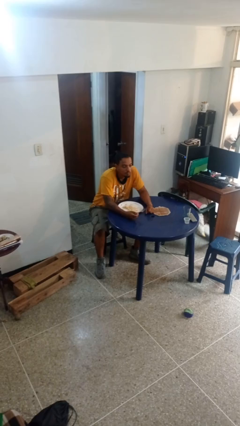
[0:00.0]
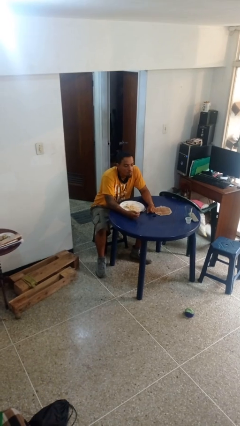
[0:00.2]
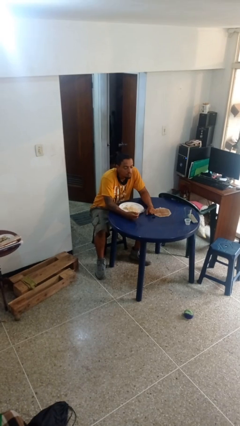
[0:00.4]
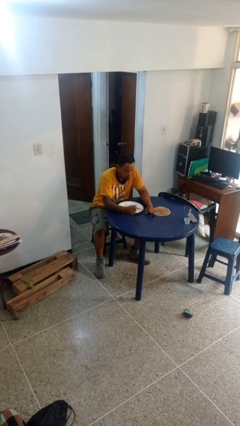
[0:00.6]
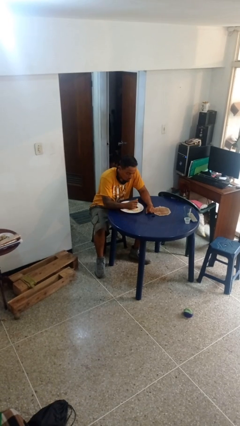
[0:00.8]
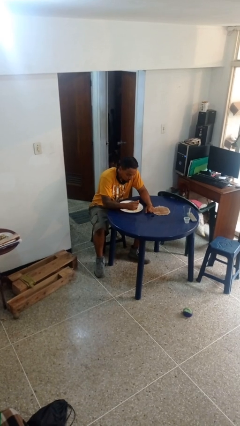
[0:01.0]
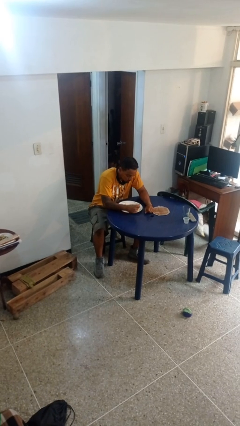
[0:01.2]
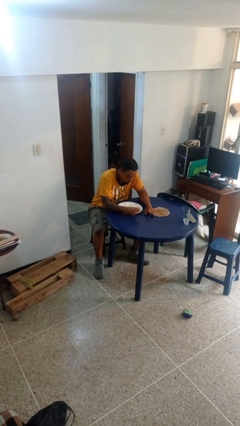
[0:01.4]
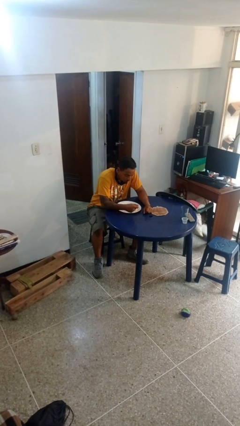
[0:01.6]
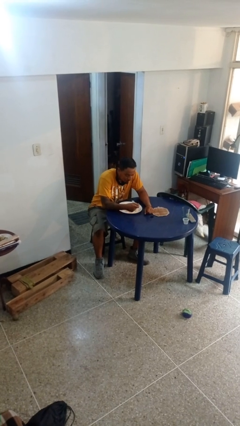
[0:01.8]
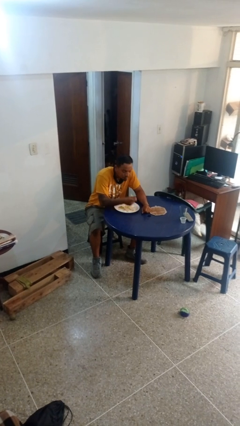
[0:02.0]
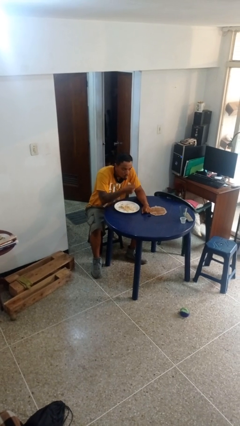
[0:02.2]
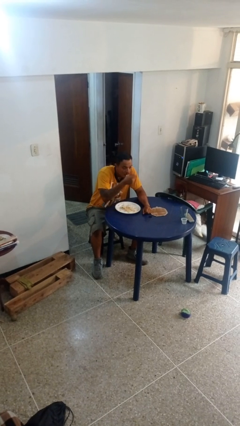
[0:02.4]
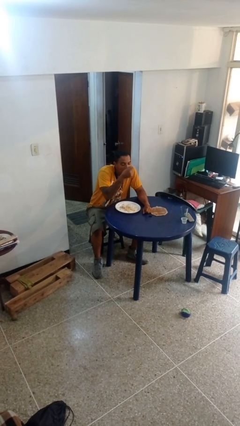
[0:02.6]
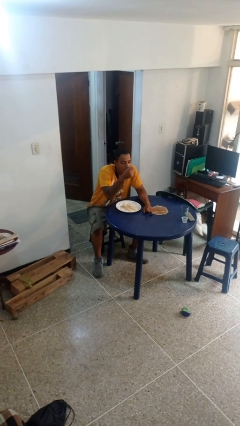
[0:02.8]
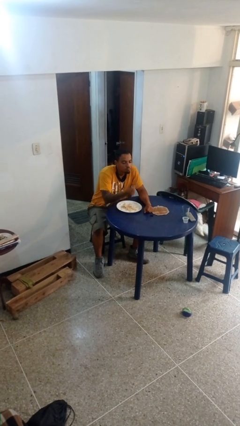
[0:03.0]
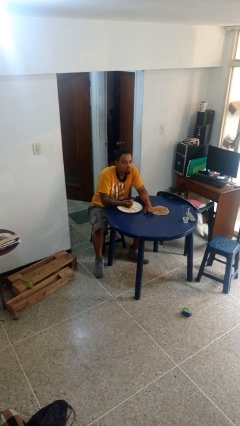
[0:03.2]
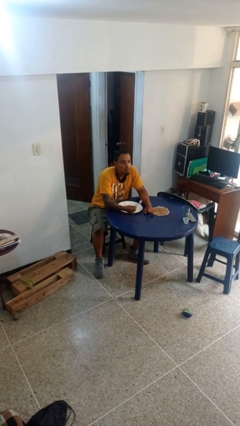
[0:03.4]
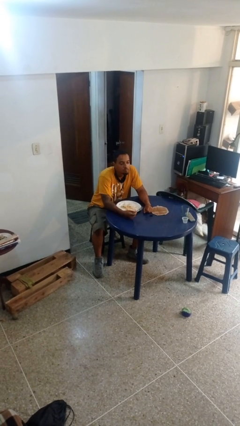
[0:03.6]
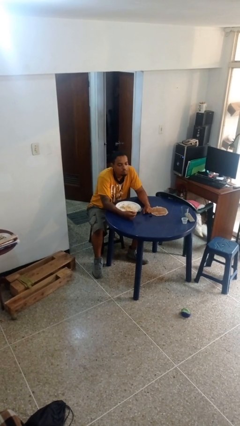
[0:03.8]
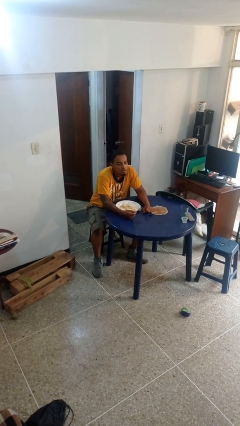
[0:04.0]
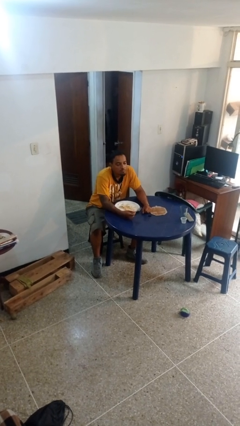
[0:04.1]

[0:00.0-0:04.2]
person eats with utensil

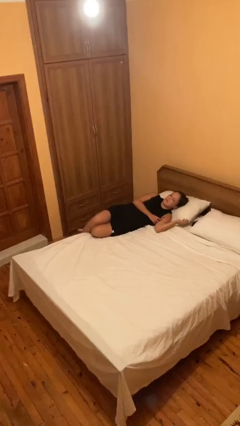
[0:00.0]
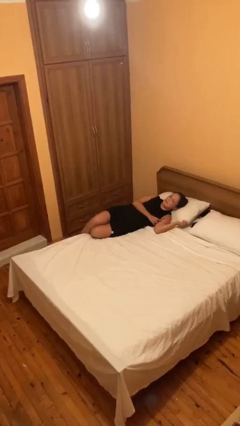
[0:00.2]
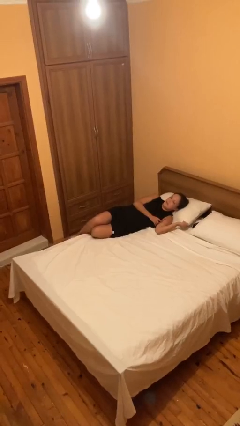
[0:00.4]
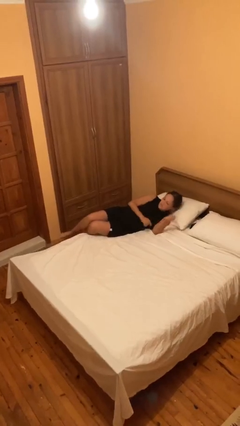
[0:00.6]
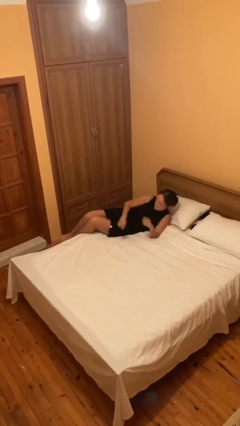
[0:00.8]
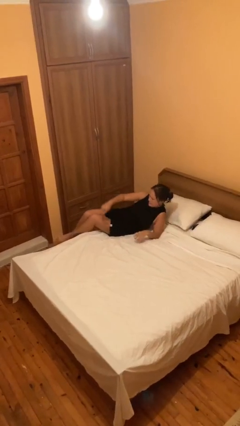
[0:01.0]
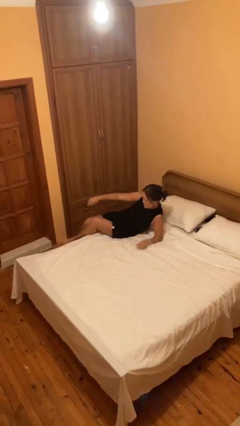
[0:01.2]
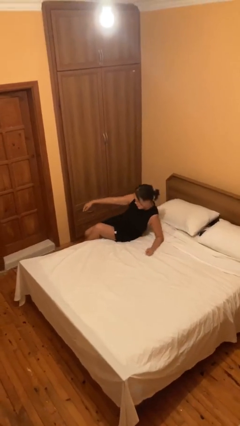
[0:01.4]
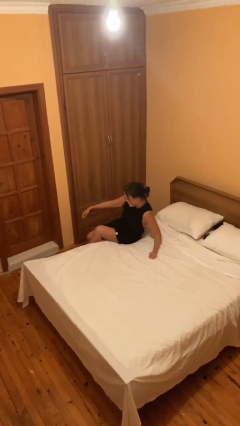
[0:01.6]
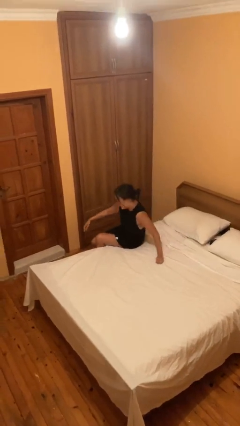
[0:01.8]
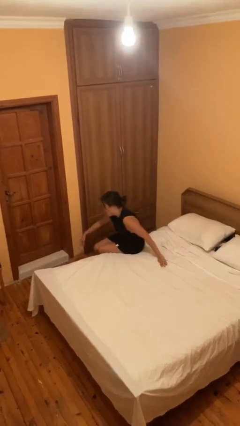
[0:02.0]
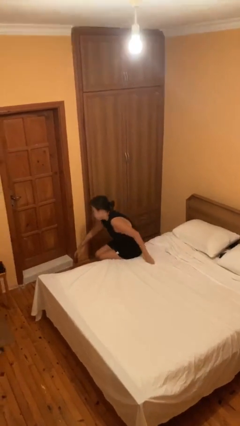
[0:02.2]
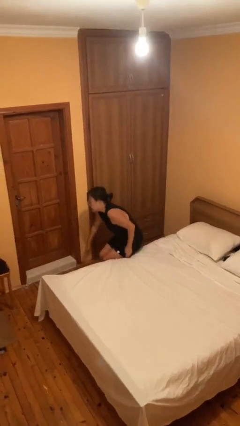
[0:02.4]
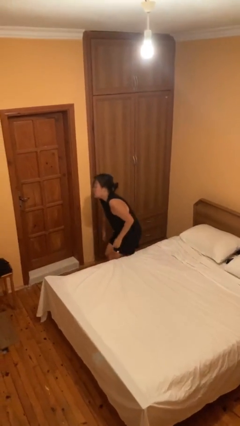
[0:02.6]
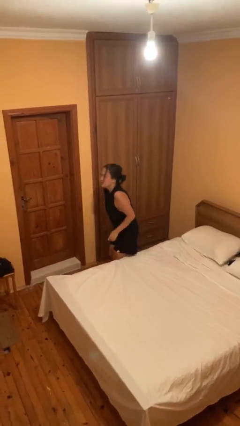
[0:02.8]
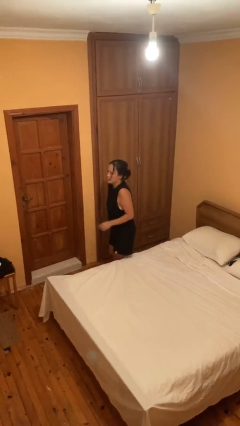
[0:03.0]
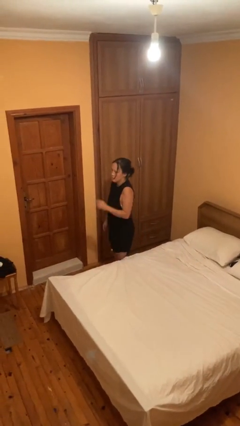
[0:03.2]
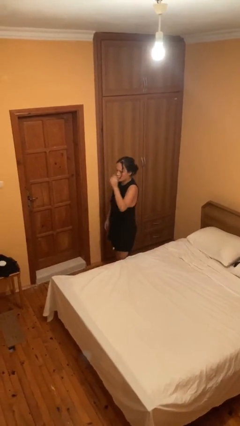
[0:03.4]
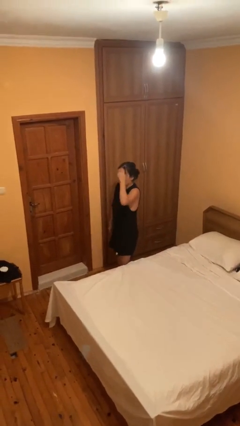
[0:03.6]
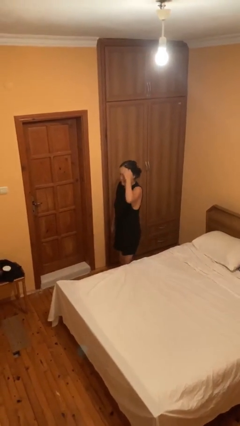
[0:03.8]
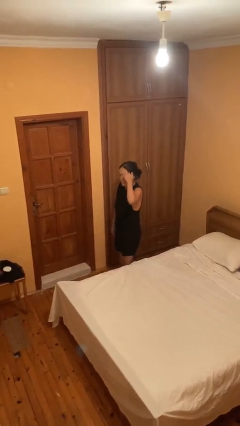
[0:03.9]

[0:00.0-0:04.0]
person stands up

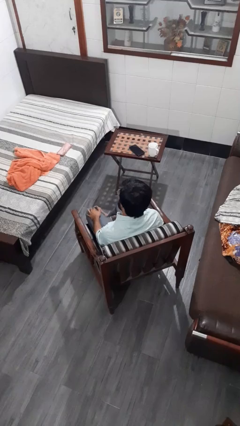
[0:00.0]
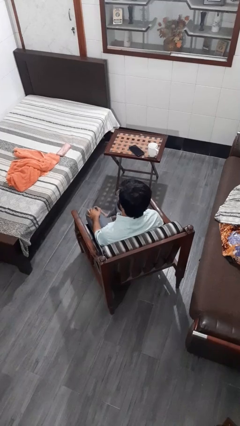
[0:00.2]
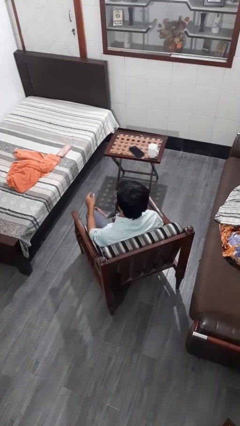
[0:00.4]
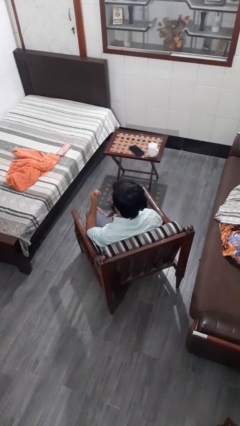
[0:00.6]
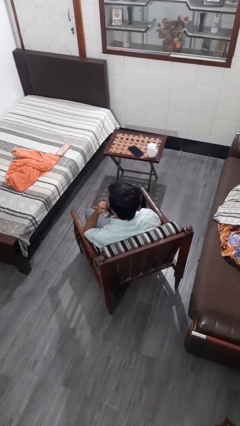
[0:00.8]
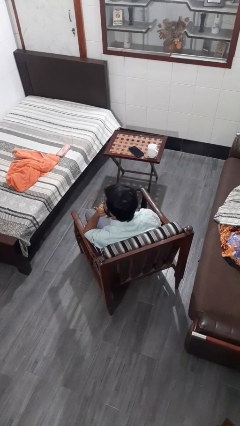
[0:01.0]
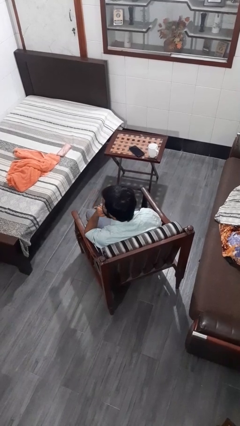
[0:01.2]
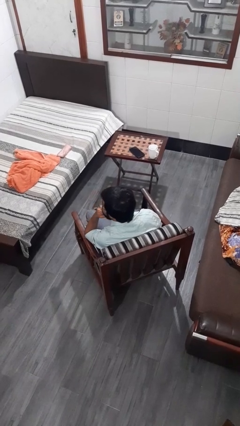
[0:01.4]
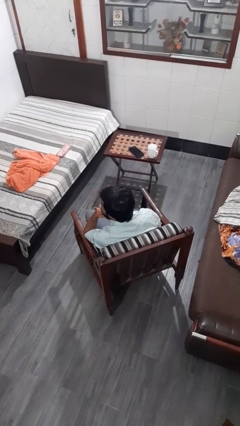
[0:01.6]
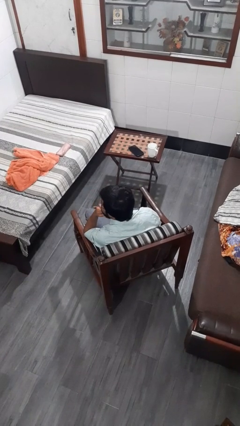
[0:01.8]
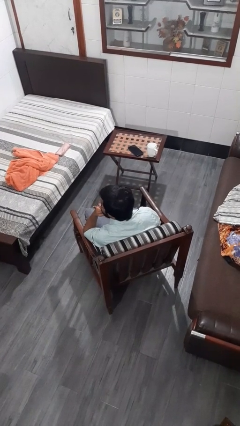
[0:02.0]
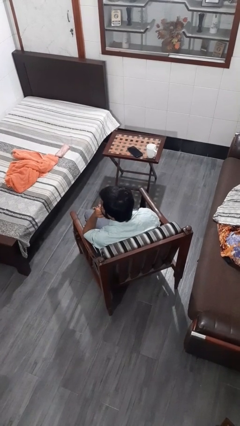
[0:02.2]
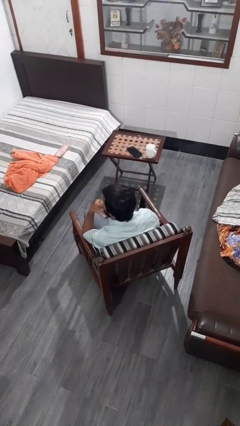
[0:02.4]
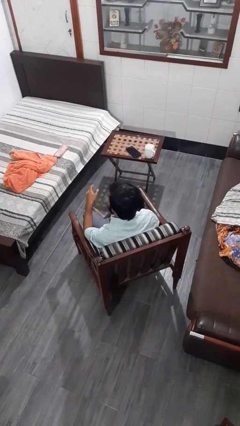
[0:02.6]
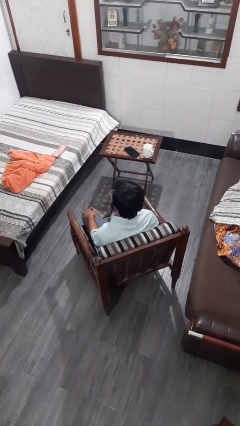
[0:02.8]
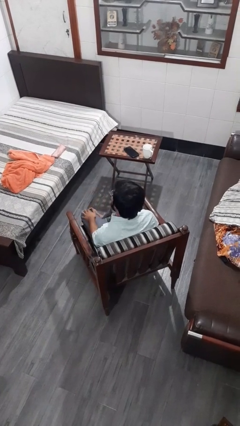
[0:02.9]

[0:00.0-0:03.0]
person strokes chin

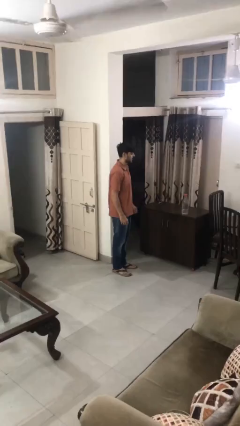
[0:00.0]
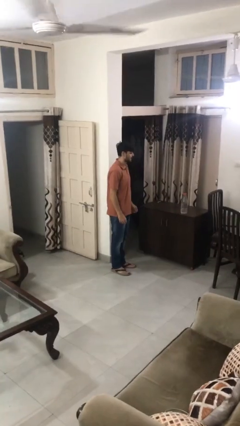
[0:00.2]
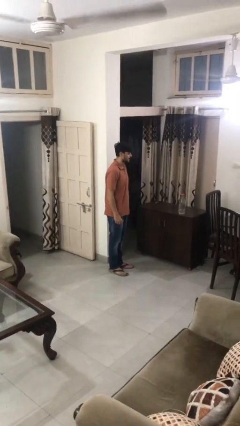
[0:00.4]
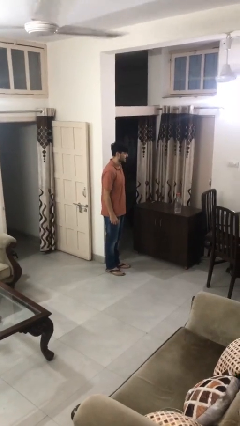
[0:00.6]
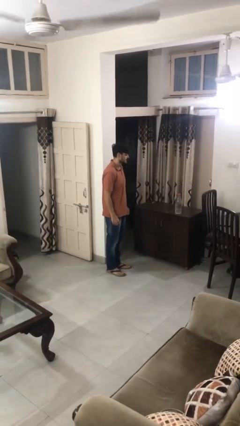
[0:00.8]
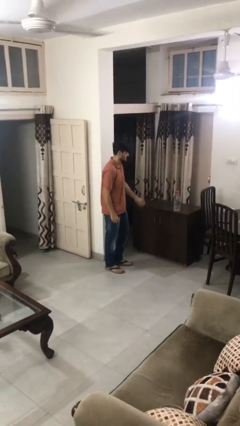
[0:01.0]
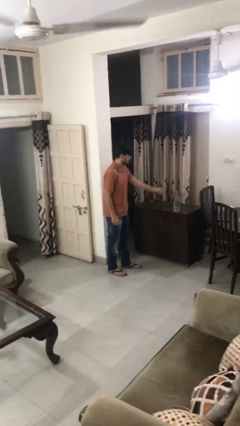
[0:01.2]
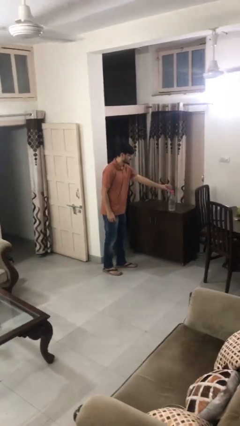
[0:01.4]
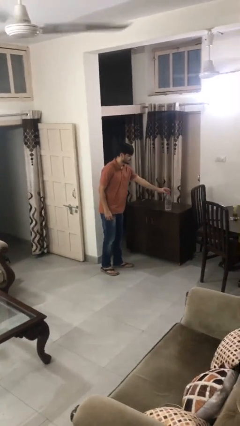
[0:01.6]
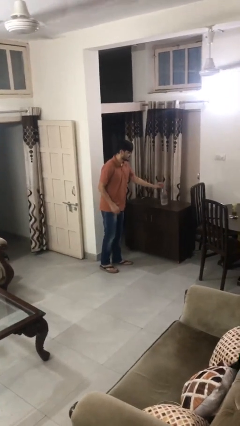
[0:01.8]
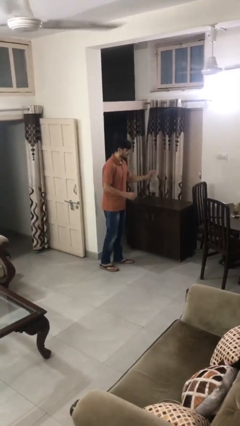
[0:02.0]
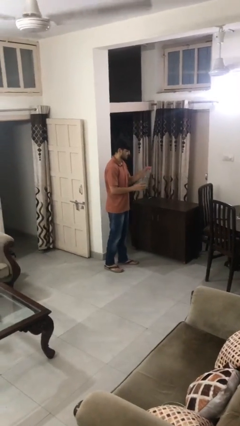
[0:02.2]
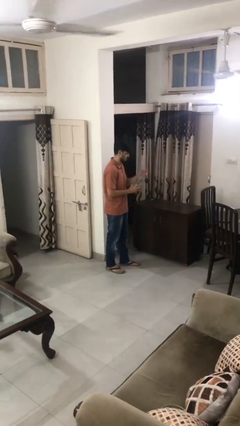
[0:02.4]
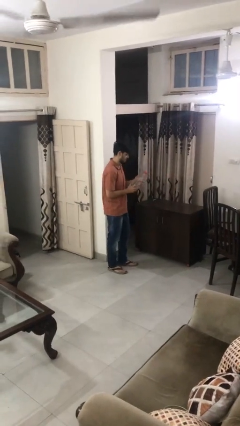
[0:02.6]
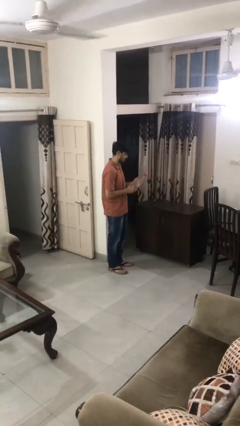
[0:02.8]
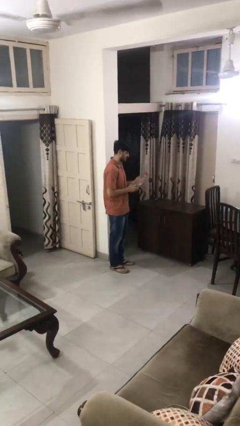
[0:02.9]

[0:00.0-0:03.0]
person picks up object from countertop

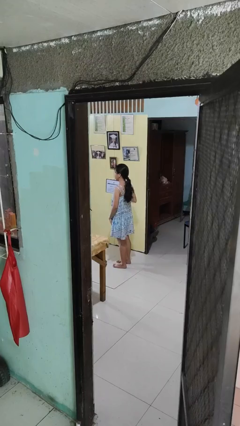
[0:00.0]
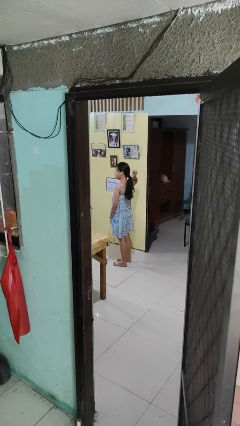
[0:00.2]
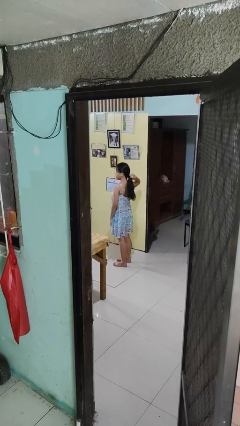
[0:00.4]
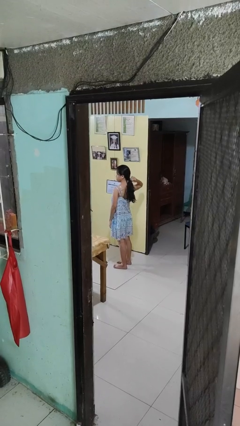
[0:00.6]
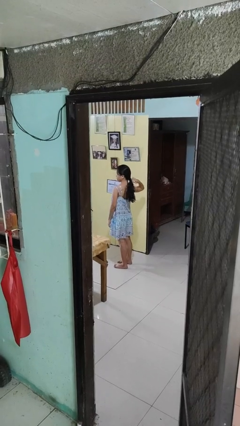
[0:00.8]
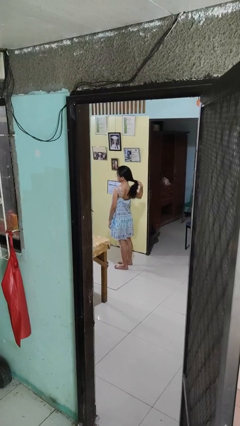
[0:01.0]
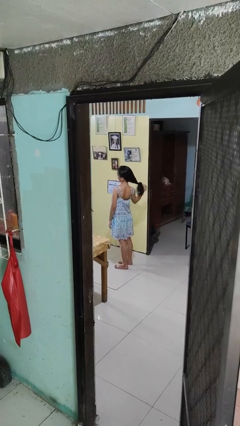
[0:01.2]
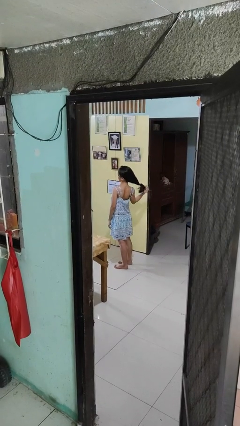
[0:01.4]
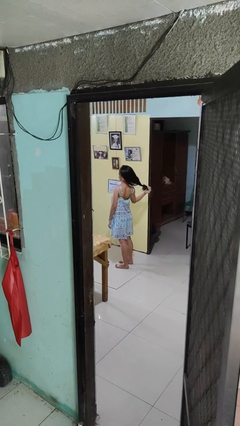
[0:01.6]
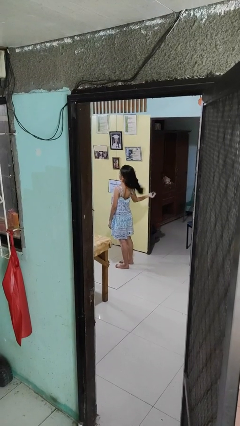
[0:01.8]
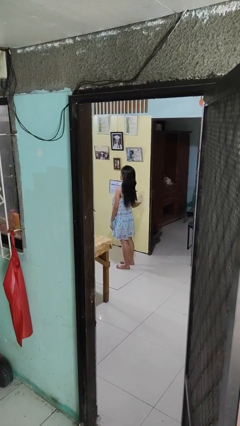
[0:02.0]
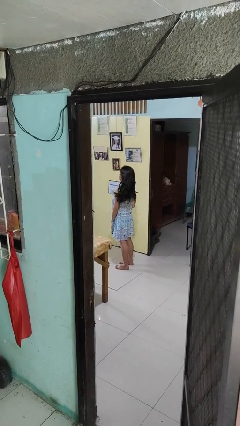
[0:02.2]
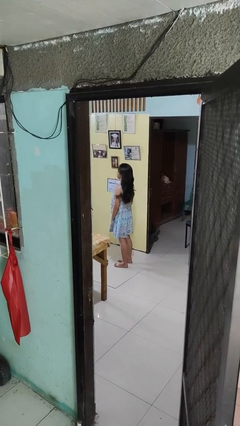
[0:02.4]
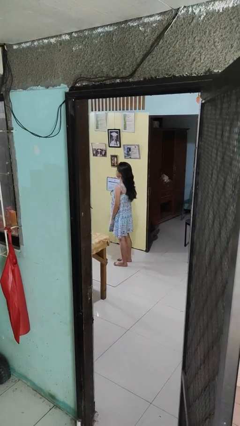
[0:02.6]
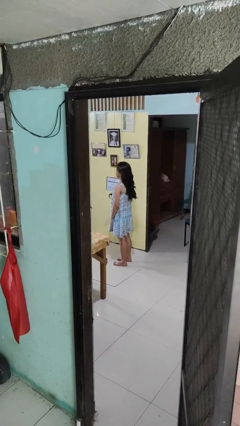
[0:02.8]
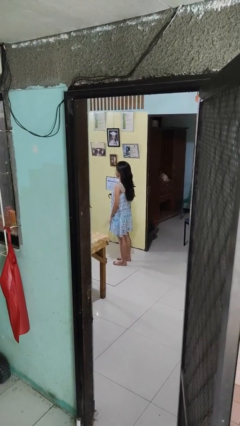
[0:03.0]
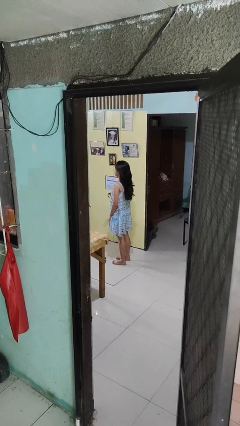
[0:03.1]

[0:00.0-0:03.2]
person takes off hairtie

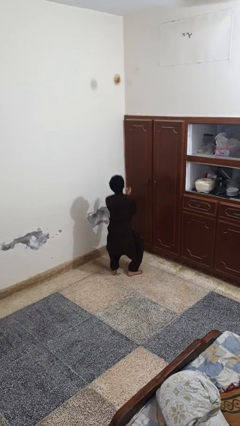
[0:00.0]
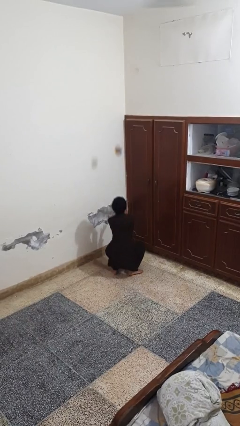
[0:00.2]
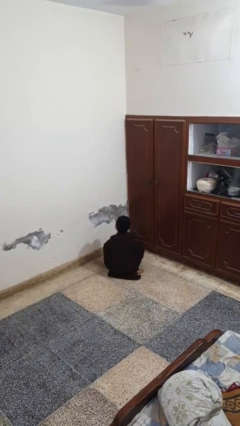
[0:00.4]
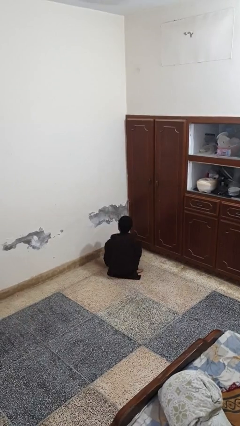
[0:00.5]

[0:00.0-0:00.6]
person catches dropped object
